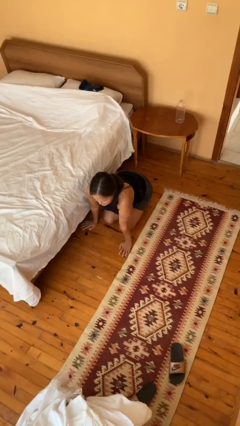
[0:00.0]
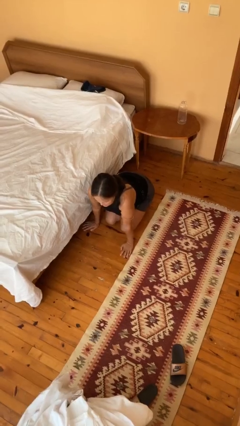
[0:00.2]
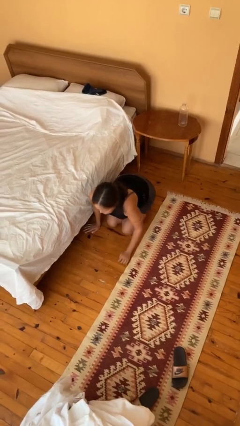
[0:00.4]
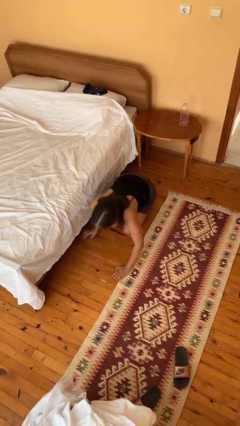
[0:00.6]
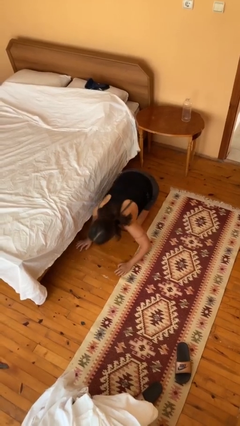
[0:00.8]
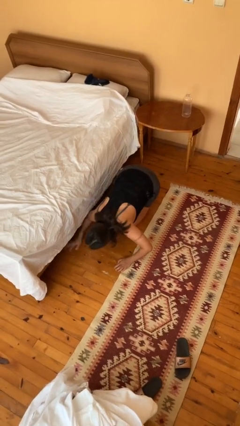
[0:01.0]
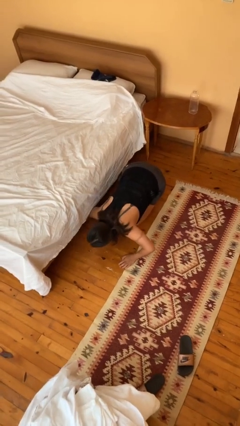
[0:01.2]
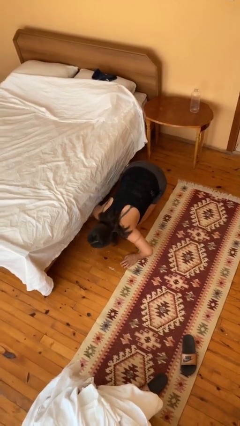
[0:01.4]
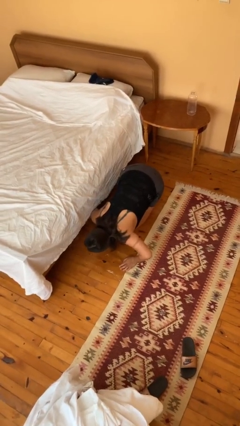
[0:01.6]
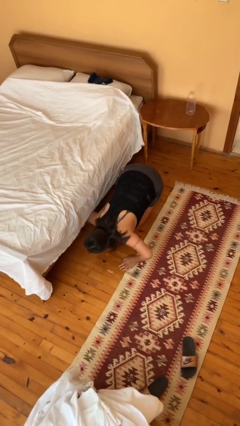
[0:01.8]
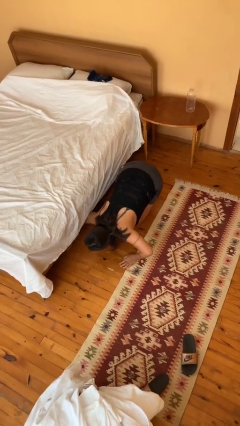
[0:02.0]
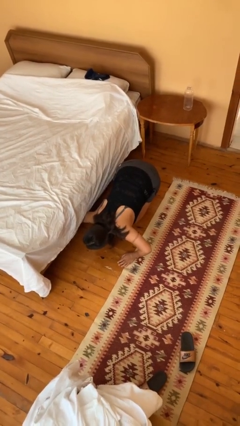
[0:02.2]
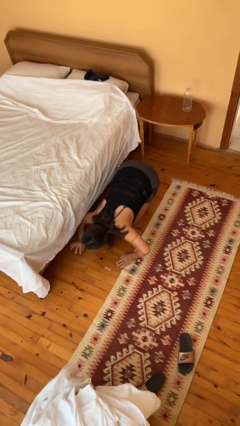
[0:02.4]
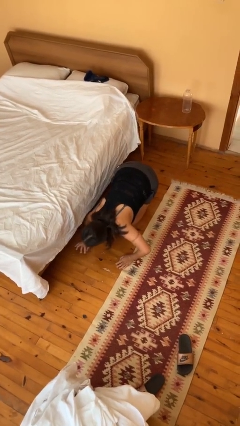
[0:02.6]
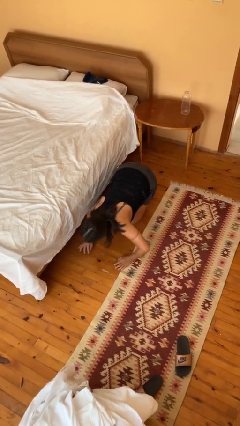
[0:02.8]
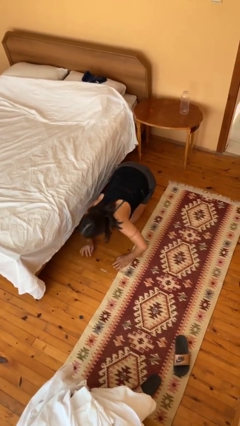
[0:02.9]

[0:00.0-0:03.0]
person searches under bed

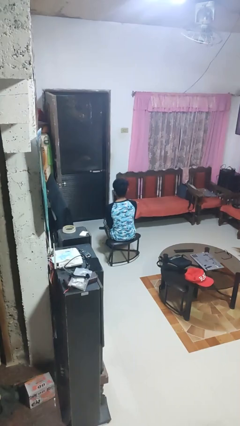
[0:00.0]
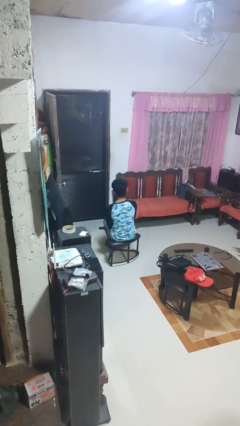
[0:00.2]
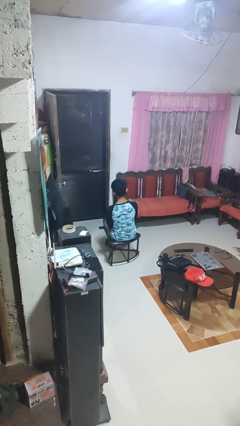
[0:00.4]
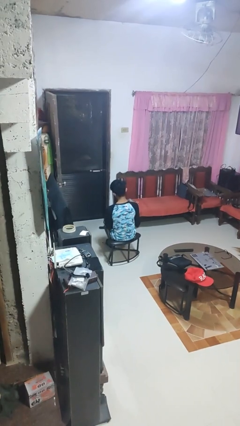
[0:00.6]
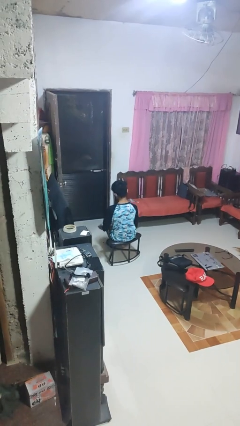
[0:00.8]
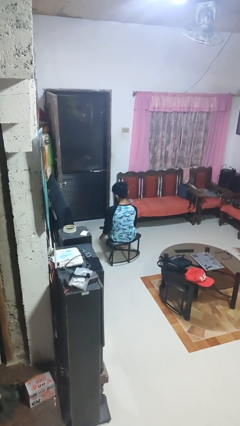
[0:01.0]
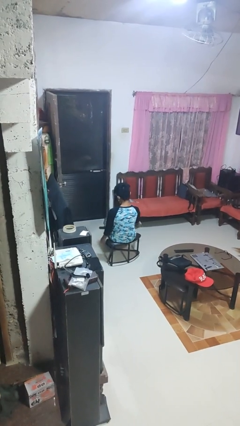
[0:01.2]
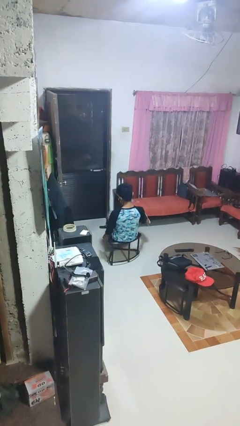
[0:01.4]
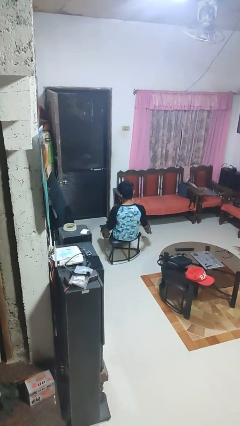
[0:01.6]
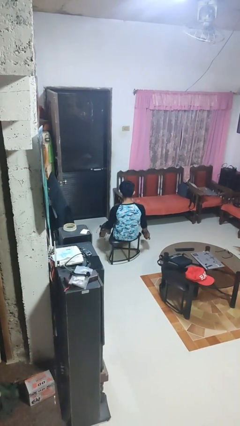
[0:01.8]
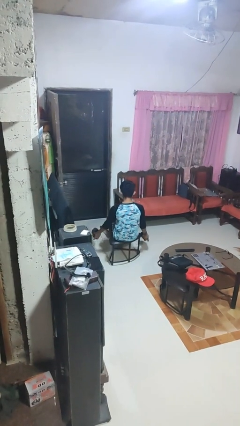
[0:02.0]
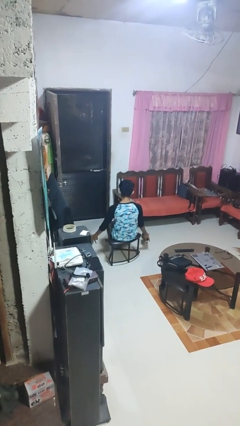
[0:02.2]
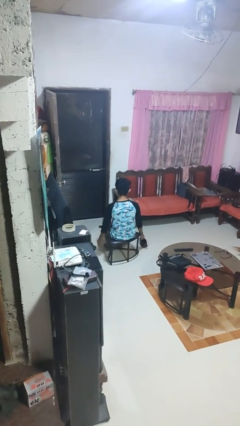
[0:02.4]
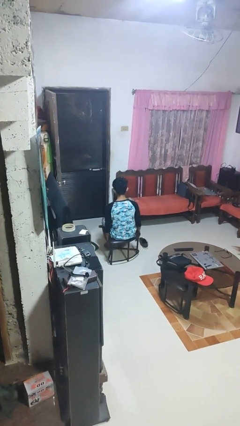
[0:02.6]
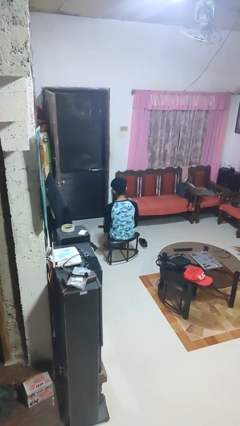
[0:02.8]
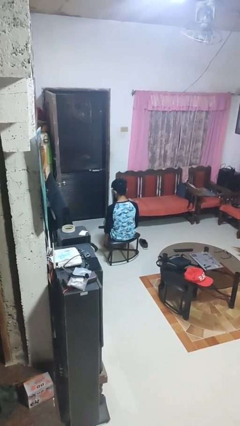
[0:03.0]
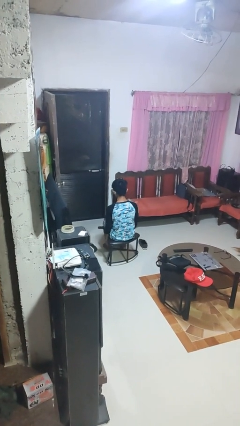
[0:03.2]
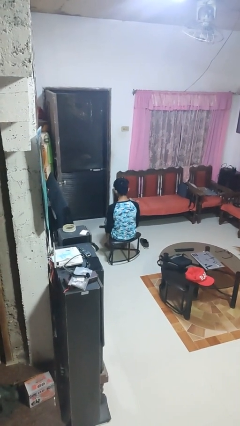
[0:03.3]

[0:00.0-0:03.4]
person takes off shoes

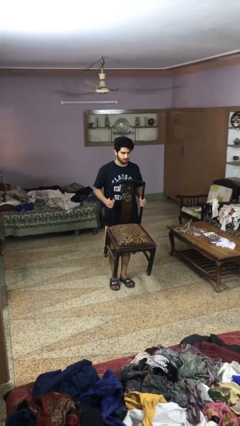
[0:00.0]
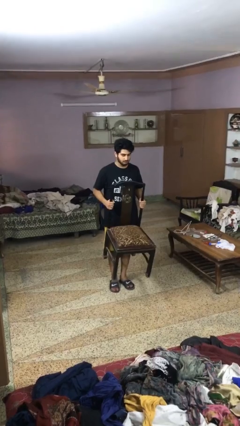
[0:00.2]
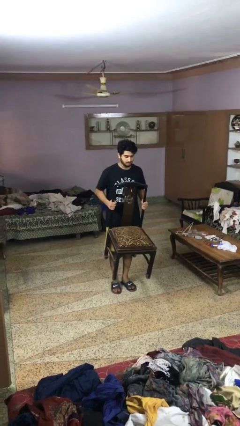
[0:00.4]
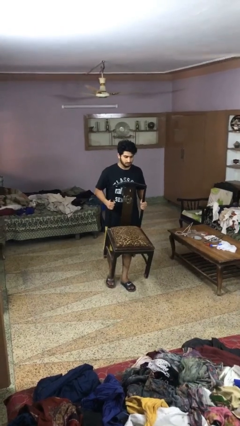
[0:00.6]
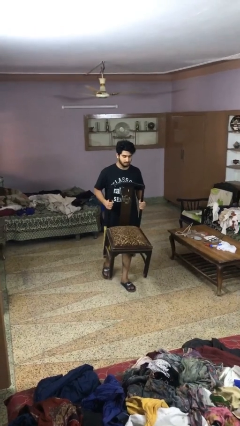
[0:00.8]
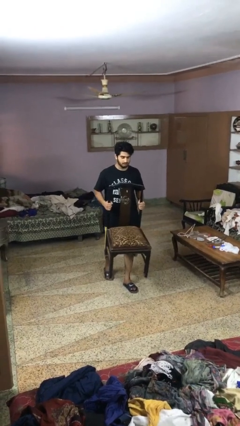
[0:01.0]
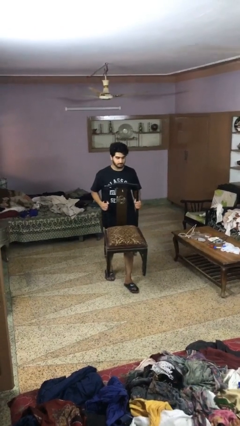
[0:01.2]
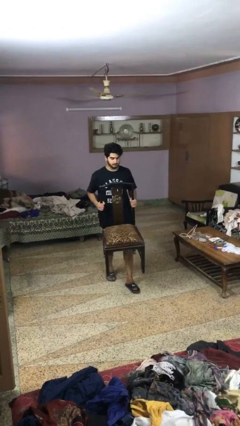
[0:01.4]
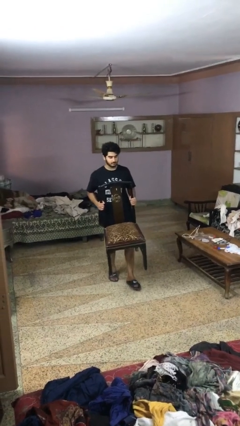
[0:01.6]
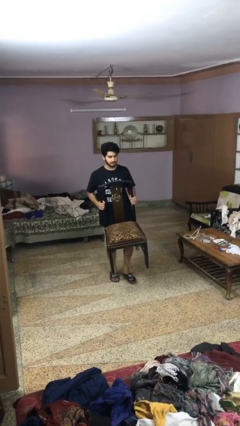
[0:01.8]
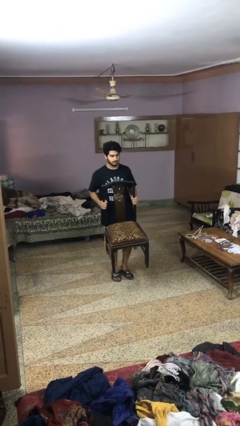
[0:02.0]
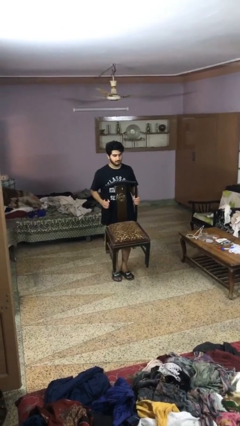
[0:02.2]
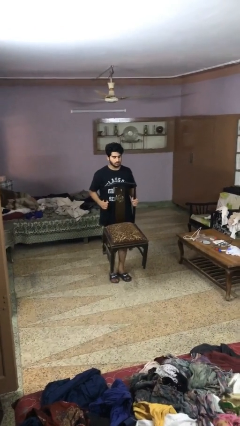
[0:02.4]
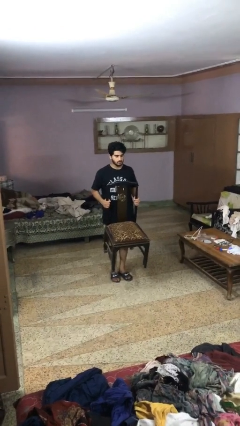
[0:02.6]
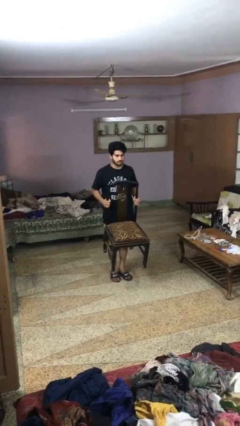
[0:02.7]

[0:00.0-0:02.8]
person carries furniture

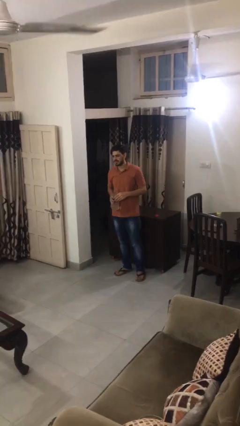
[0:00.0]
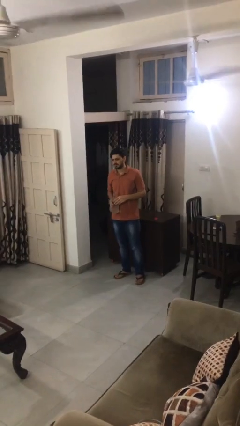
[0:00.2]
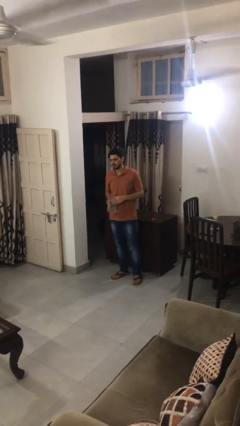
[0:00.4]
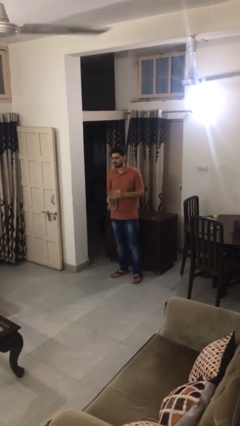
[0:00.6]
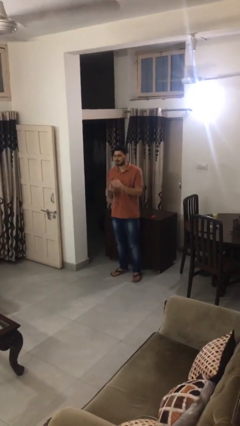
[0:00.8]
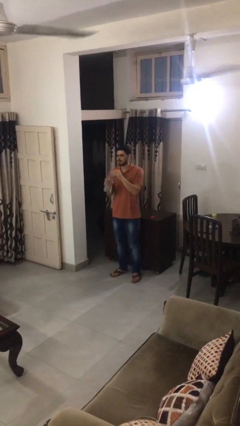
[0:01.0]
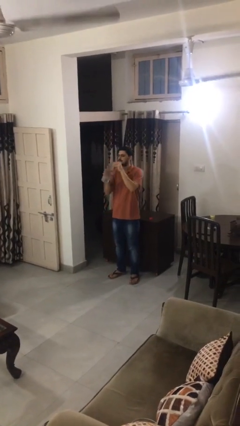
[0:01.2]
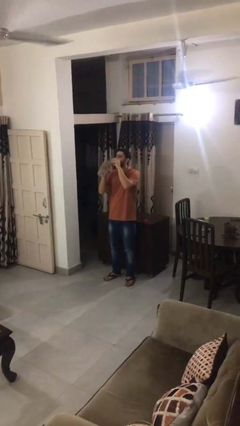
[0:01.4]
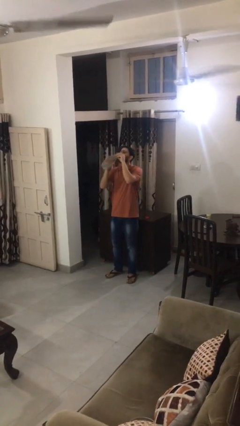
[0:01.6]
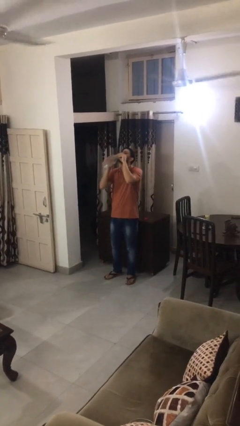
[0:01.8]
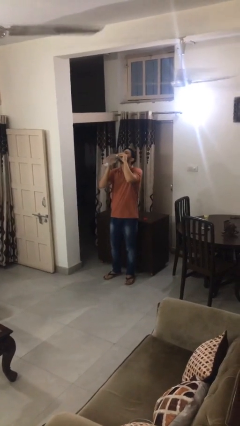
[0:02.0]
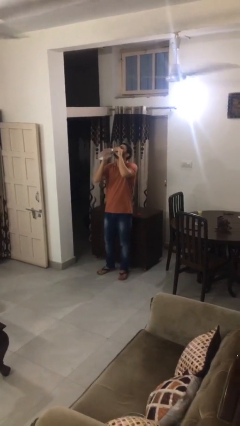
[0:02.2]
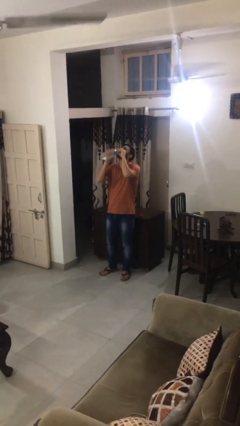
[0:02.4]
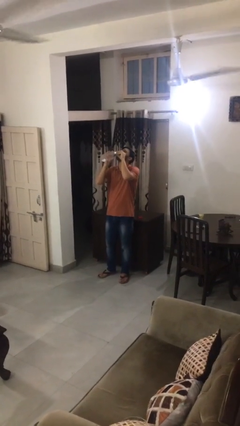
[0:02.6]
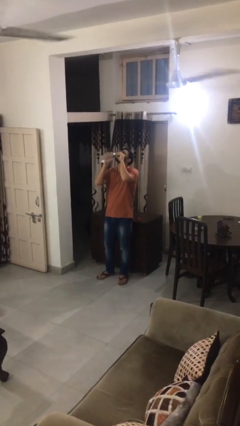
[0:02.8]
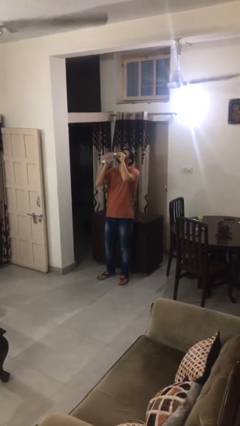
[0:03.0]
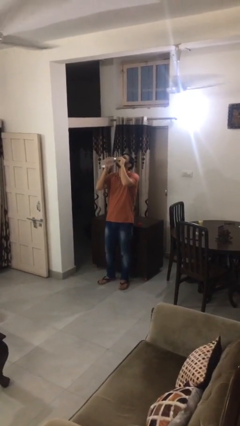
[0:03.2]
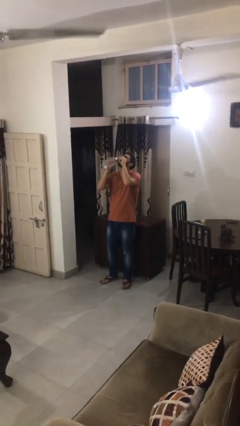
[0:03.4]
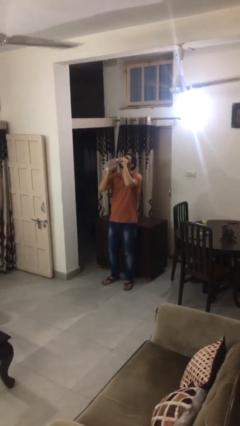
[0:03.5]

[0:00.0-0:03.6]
person drinks from bottle

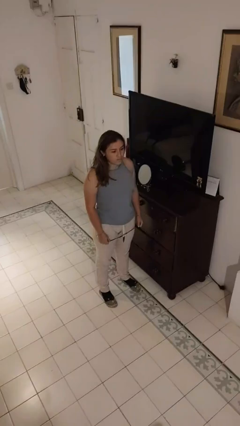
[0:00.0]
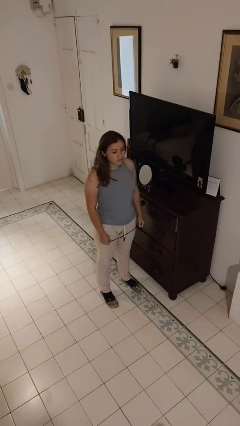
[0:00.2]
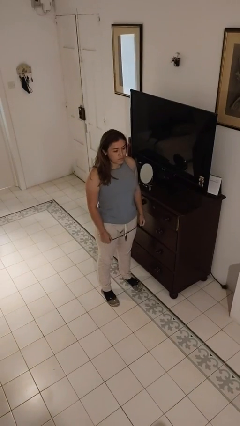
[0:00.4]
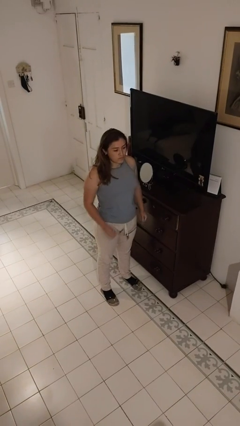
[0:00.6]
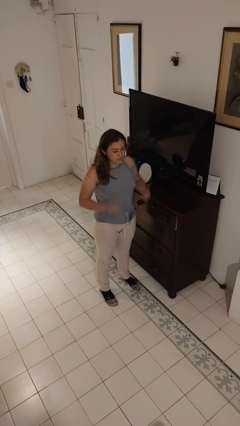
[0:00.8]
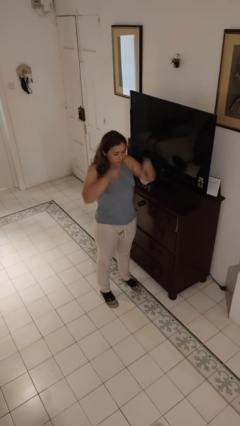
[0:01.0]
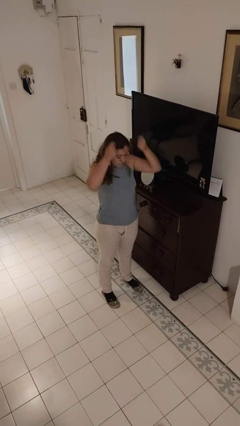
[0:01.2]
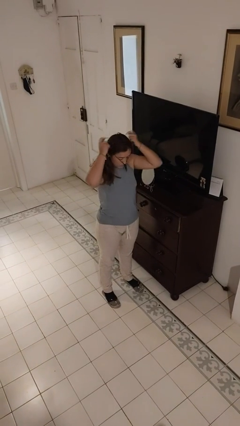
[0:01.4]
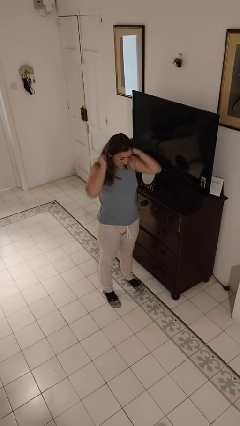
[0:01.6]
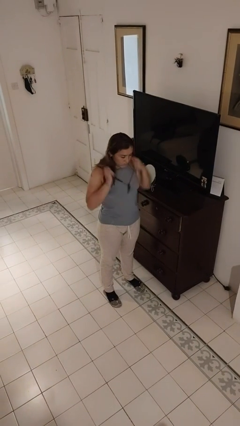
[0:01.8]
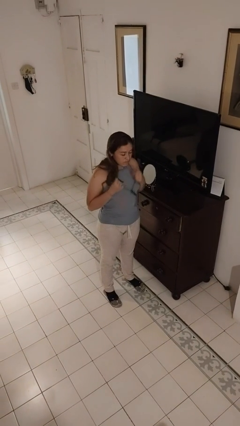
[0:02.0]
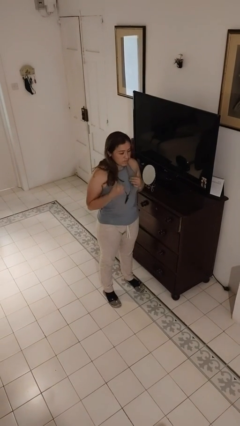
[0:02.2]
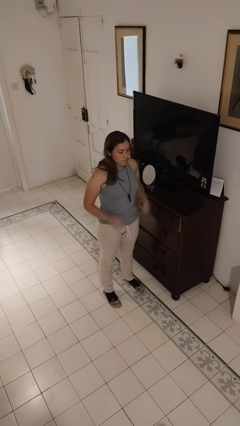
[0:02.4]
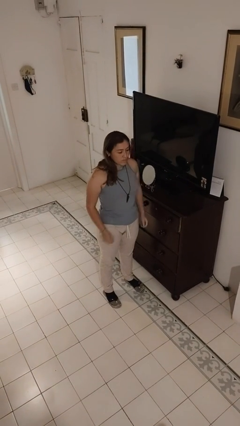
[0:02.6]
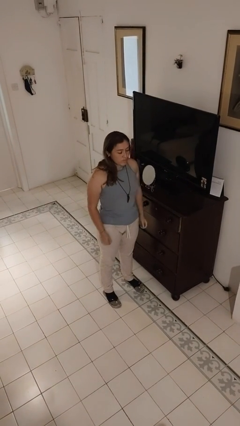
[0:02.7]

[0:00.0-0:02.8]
person puts on necklace

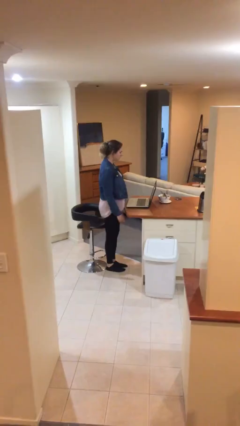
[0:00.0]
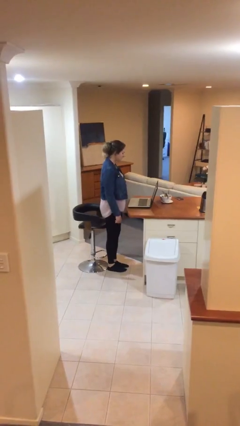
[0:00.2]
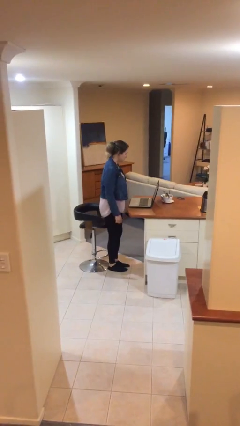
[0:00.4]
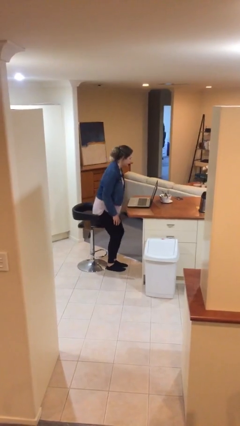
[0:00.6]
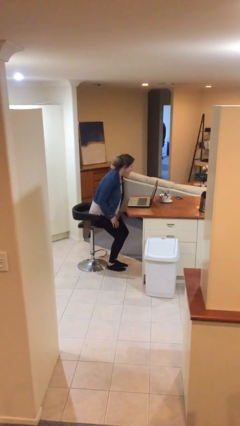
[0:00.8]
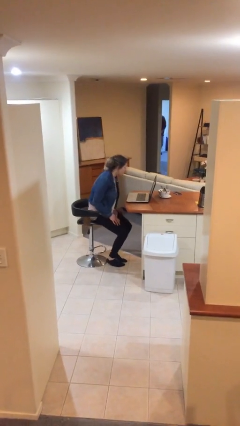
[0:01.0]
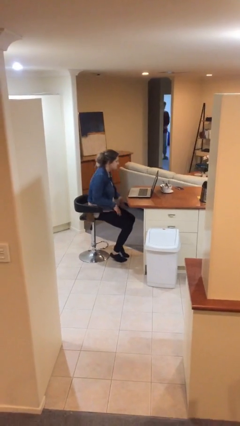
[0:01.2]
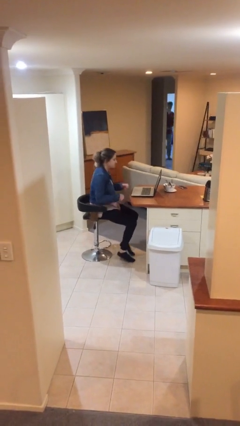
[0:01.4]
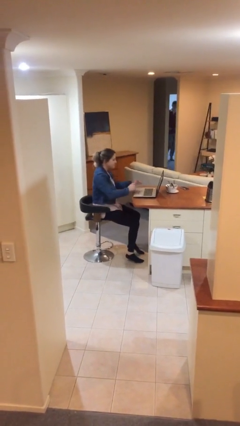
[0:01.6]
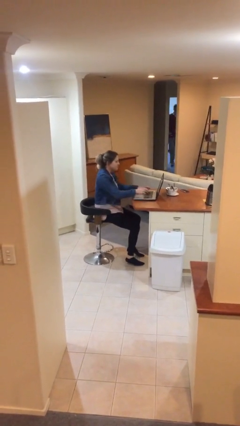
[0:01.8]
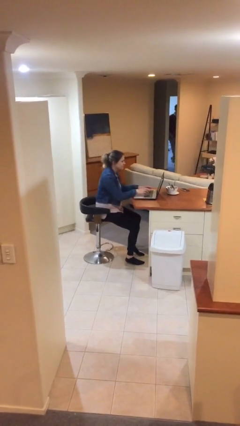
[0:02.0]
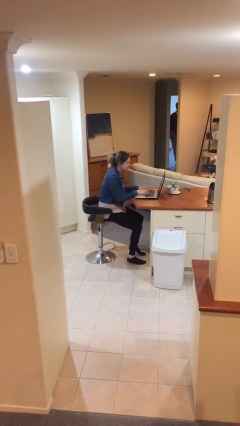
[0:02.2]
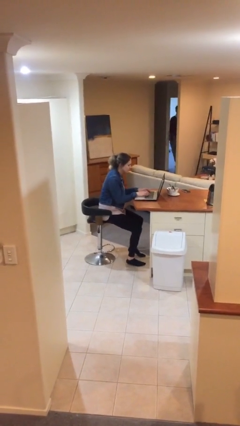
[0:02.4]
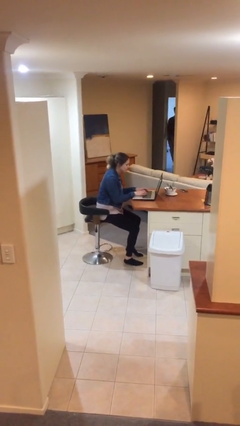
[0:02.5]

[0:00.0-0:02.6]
person sits down
